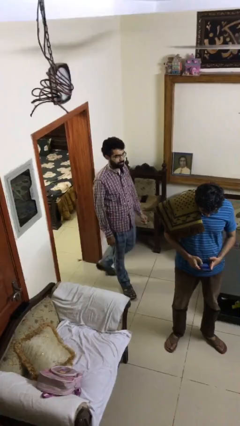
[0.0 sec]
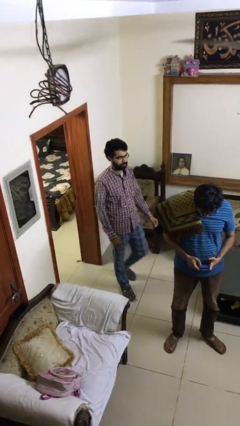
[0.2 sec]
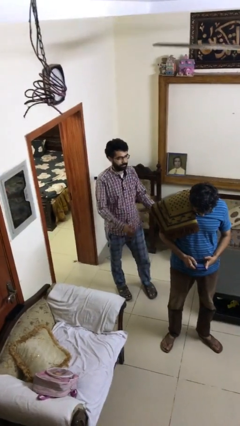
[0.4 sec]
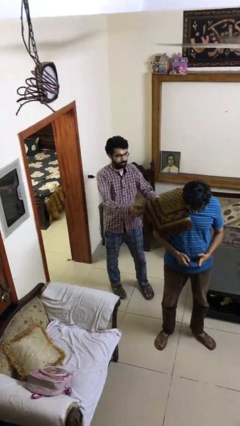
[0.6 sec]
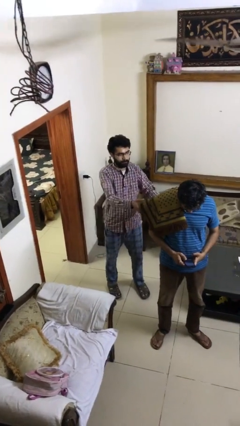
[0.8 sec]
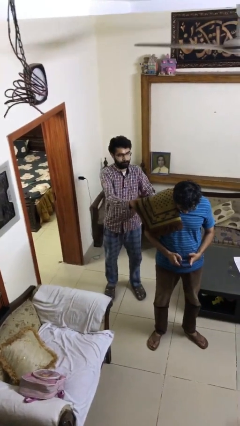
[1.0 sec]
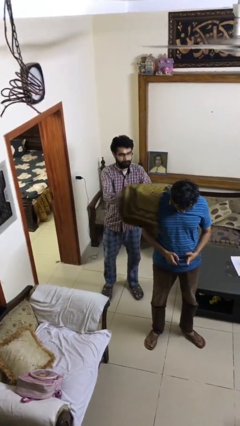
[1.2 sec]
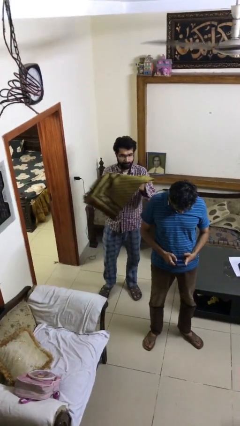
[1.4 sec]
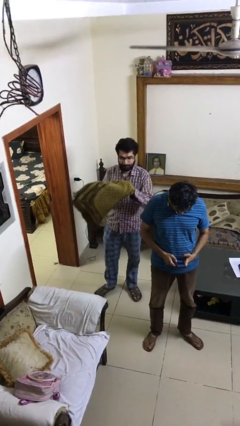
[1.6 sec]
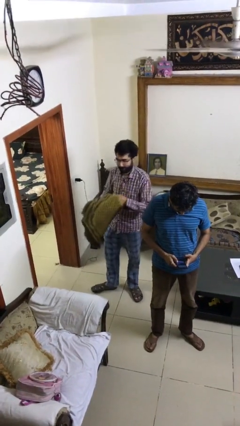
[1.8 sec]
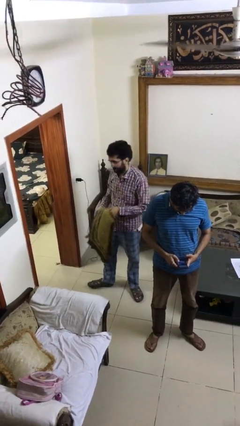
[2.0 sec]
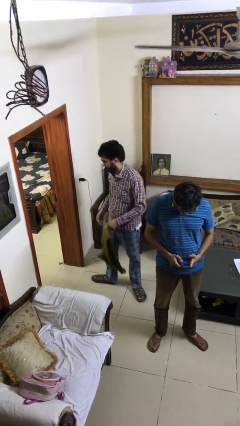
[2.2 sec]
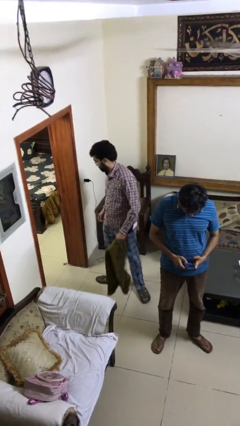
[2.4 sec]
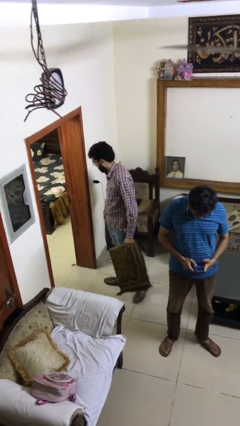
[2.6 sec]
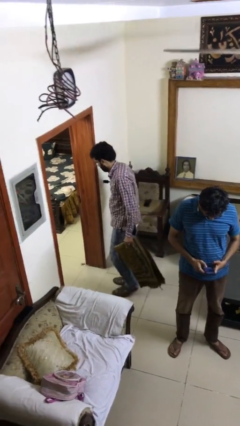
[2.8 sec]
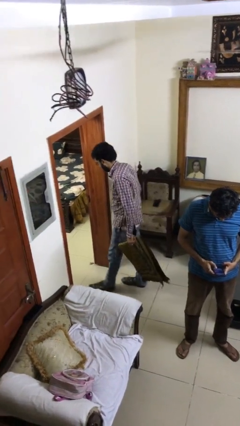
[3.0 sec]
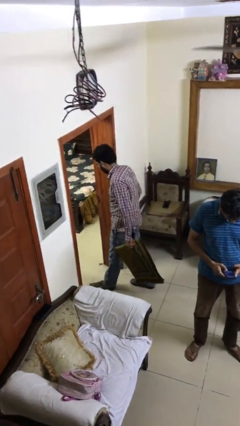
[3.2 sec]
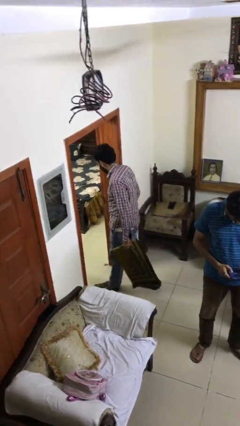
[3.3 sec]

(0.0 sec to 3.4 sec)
person steals object from person

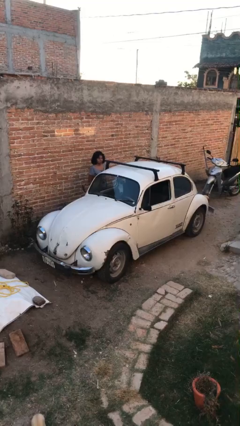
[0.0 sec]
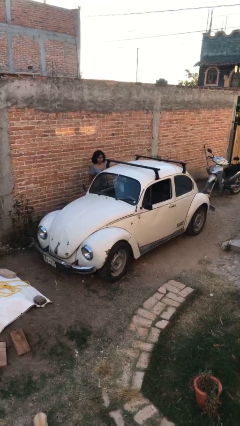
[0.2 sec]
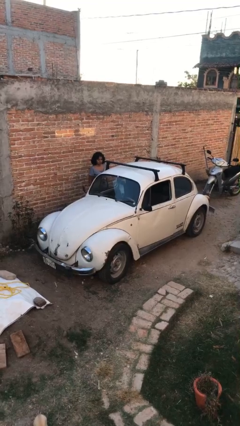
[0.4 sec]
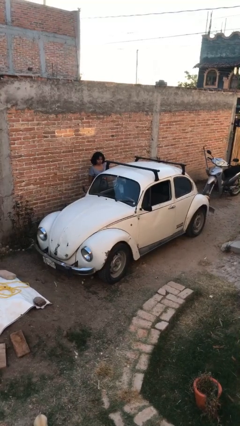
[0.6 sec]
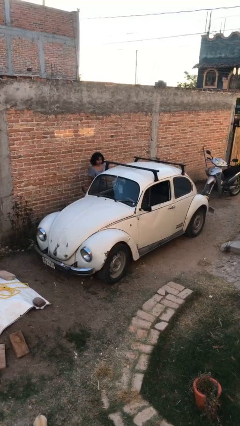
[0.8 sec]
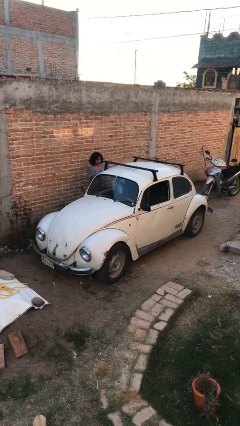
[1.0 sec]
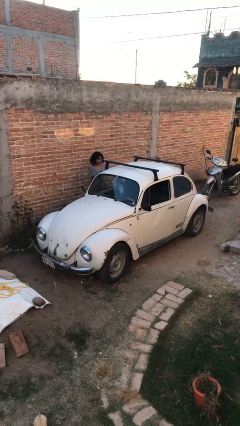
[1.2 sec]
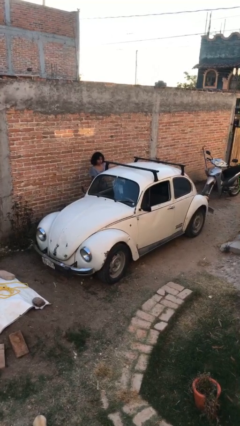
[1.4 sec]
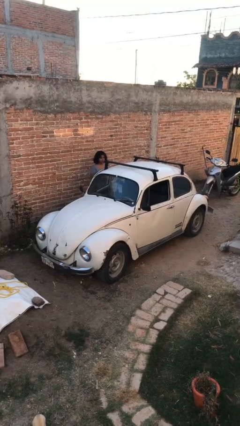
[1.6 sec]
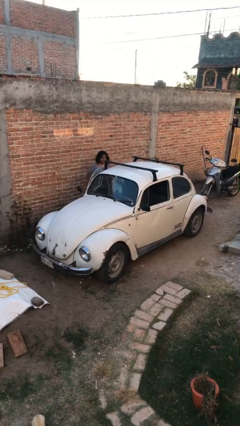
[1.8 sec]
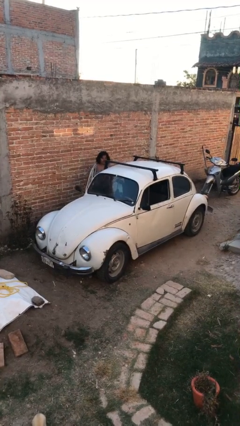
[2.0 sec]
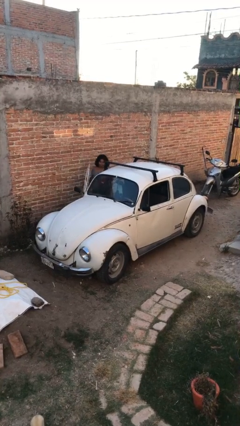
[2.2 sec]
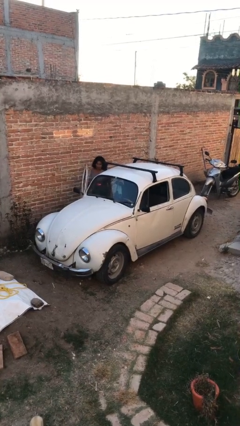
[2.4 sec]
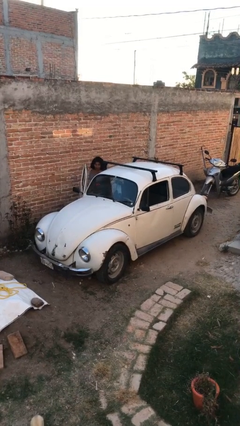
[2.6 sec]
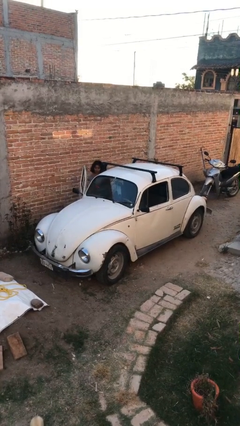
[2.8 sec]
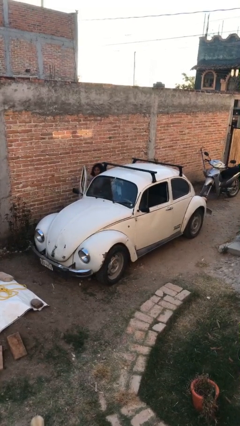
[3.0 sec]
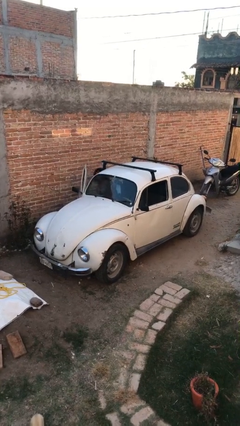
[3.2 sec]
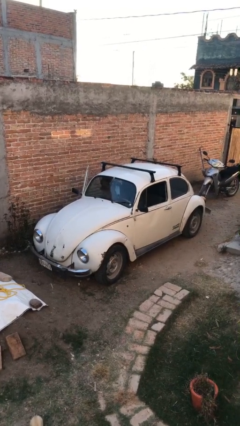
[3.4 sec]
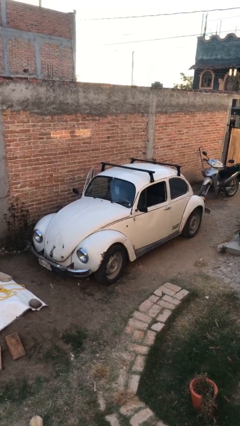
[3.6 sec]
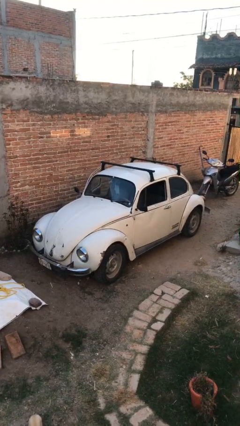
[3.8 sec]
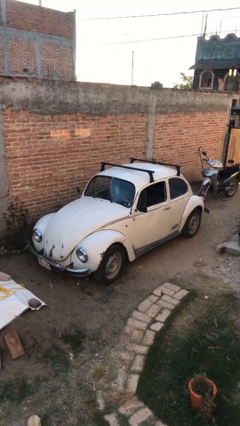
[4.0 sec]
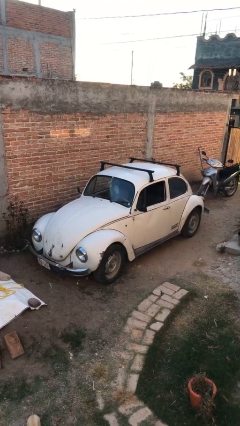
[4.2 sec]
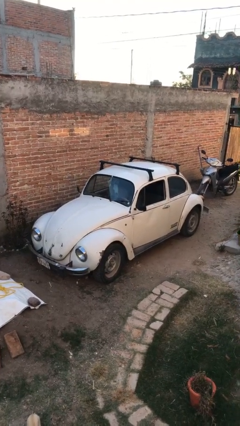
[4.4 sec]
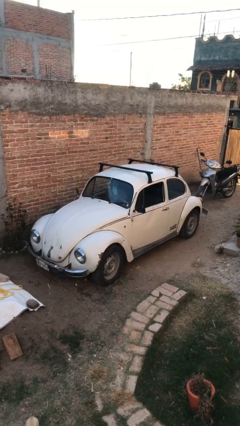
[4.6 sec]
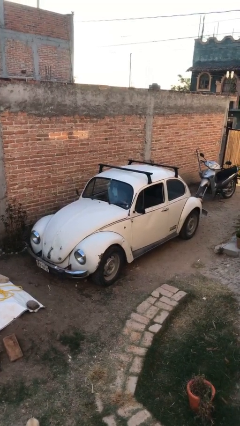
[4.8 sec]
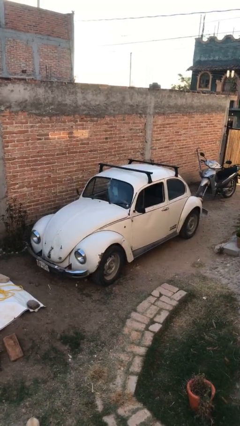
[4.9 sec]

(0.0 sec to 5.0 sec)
car picks up person

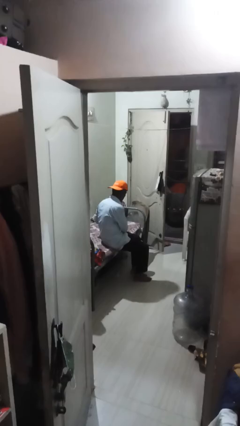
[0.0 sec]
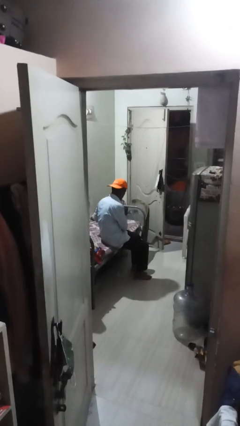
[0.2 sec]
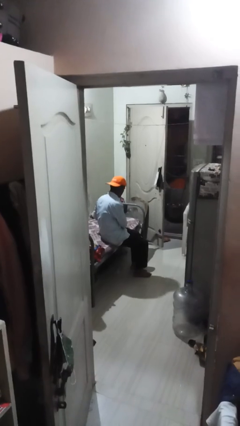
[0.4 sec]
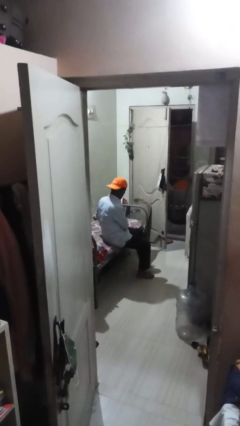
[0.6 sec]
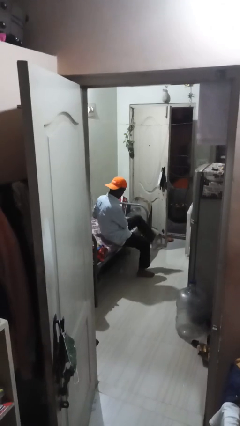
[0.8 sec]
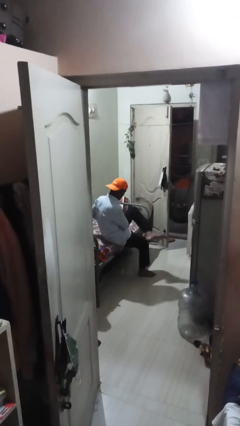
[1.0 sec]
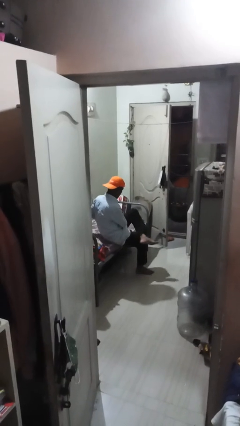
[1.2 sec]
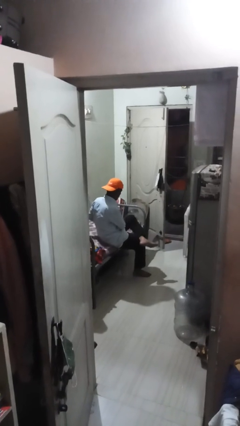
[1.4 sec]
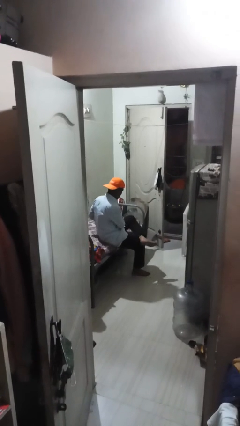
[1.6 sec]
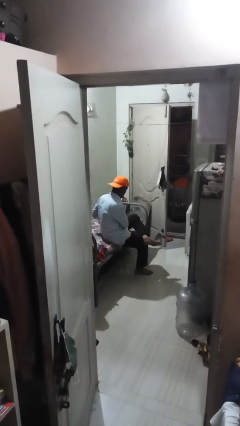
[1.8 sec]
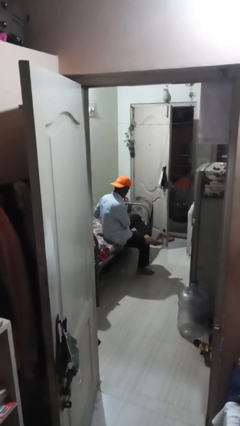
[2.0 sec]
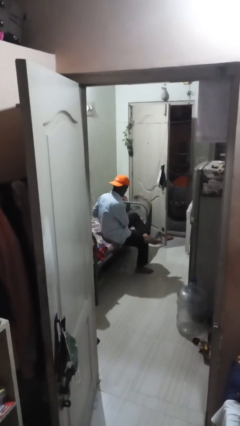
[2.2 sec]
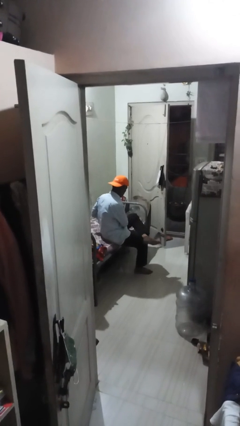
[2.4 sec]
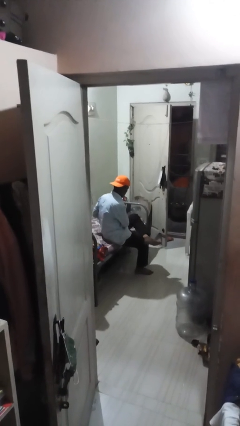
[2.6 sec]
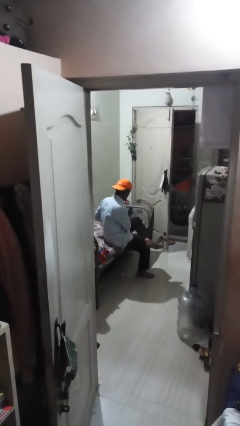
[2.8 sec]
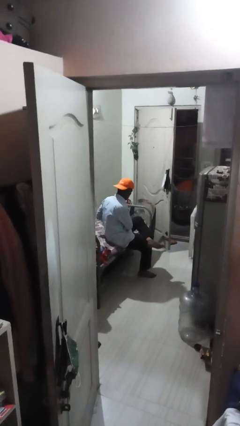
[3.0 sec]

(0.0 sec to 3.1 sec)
person crosses legs

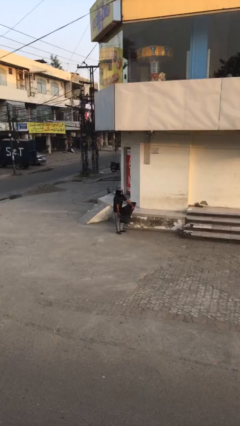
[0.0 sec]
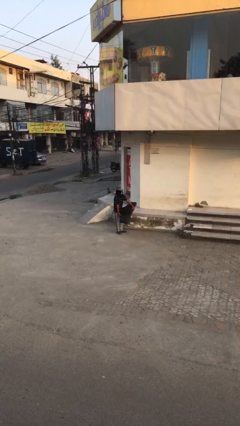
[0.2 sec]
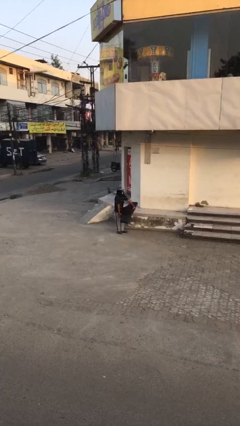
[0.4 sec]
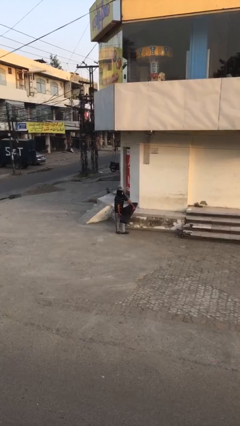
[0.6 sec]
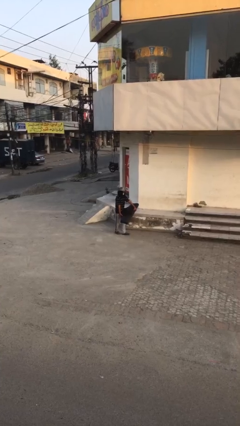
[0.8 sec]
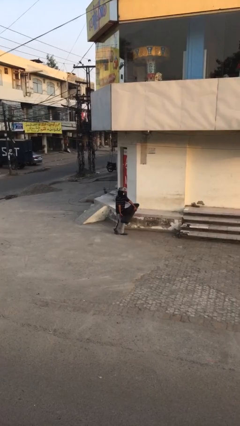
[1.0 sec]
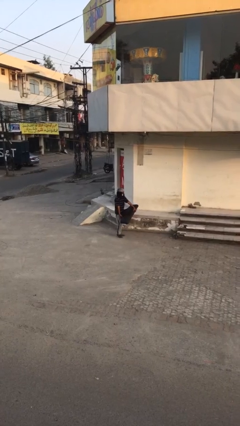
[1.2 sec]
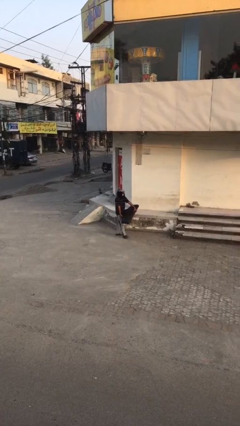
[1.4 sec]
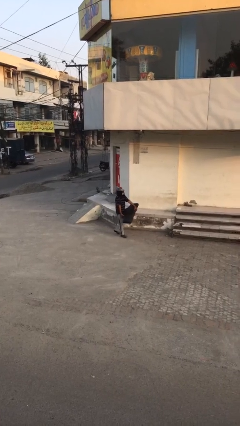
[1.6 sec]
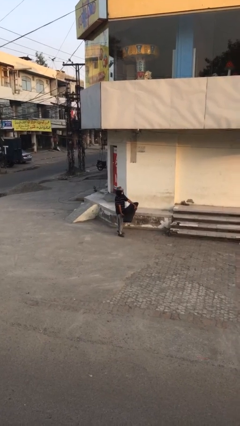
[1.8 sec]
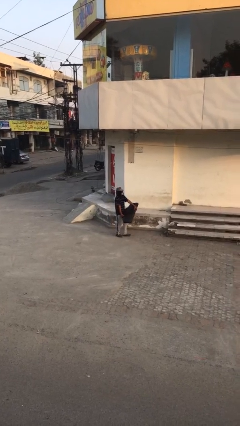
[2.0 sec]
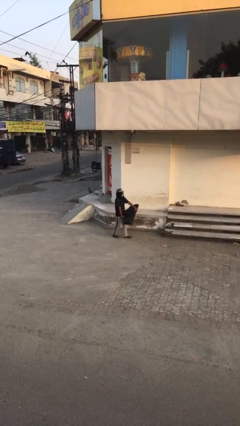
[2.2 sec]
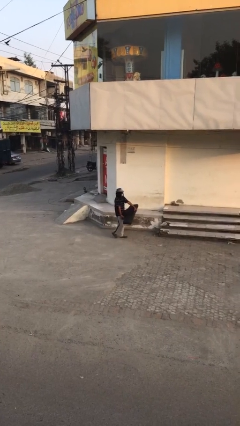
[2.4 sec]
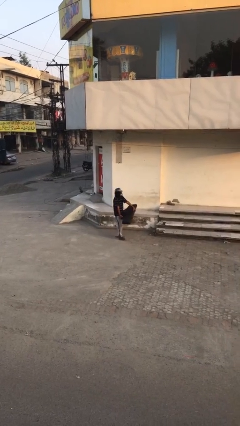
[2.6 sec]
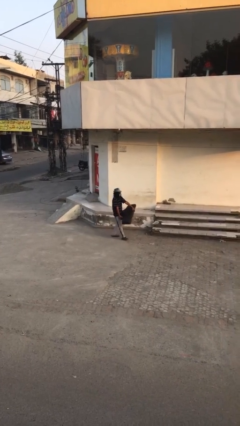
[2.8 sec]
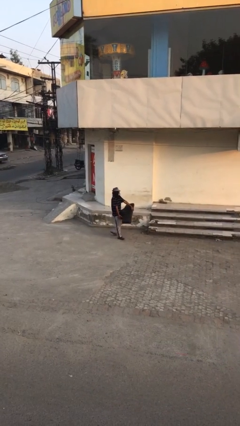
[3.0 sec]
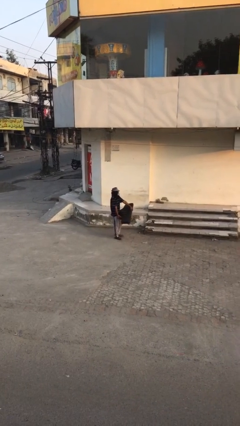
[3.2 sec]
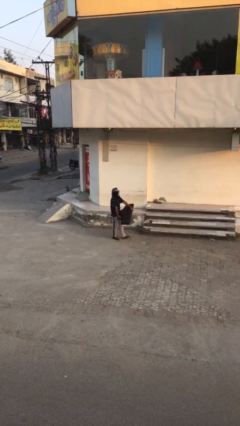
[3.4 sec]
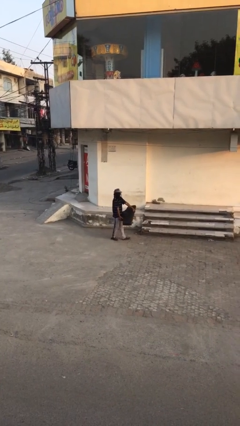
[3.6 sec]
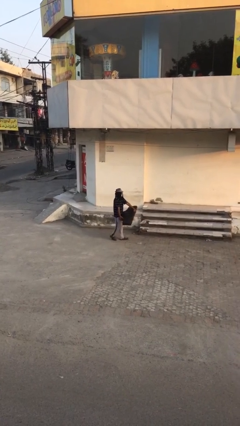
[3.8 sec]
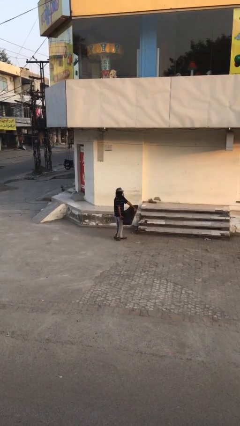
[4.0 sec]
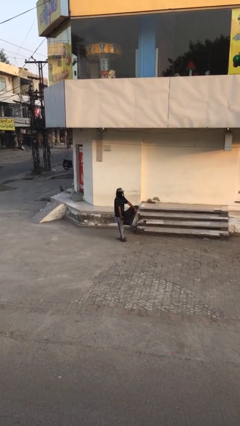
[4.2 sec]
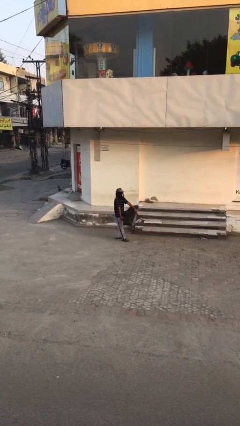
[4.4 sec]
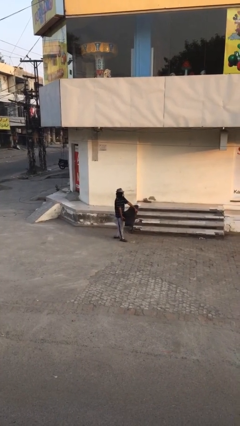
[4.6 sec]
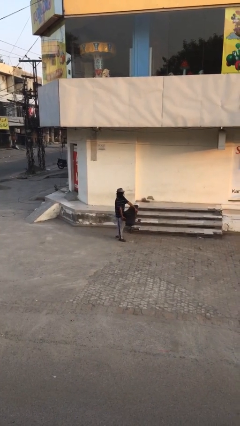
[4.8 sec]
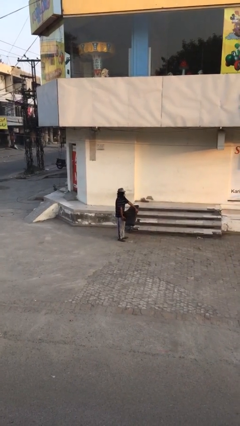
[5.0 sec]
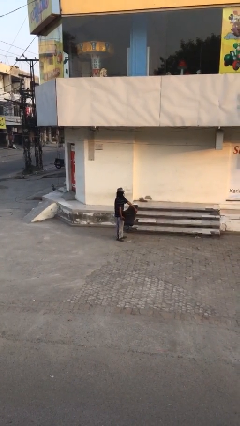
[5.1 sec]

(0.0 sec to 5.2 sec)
person carries heavy object

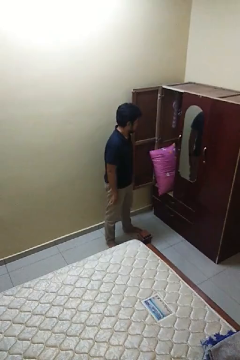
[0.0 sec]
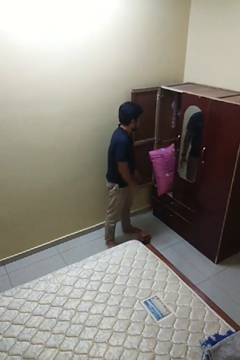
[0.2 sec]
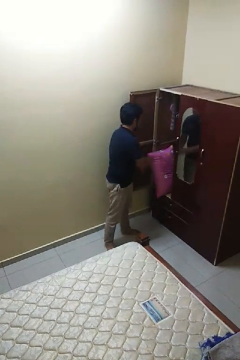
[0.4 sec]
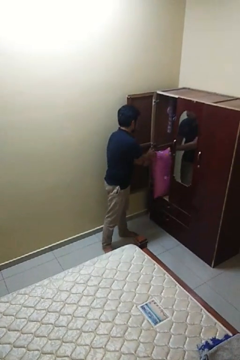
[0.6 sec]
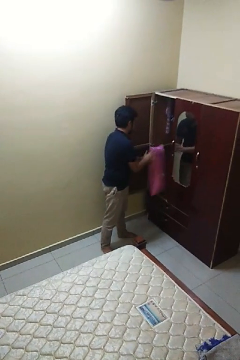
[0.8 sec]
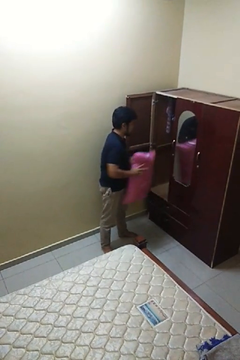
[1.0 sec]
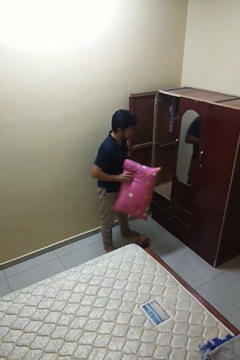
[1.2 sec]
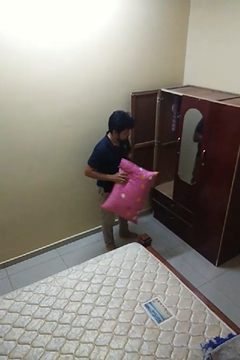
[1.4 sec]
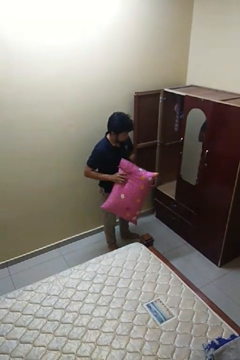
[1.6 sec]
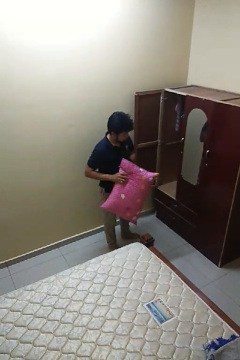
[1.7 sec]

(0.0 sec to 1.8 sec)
person picks up object from cabinet
